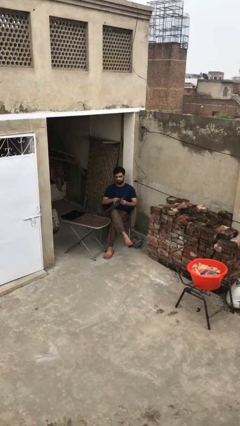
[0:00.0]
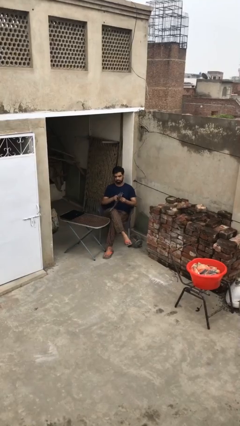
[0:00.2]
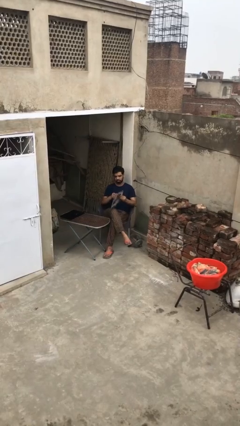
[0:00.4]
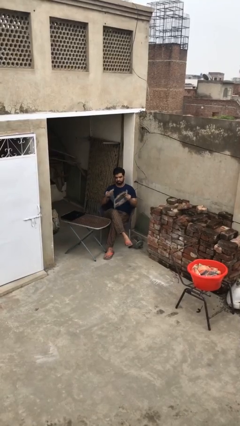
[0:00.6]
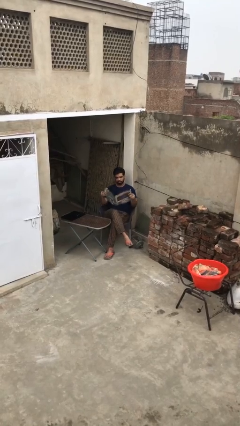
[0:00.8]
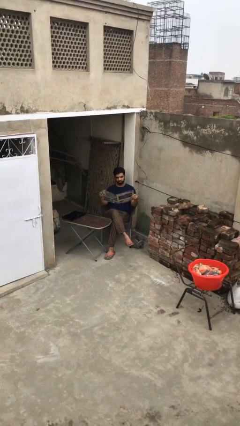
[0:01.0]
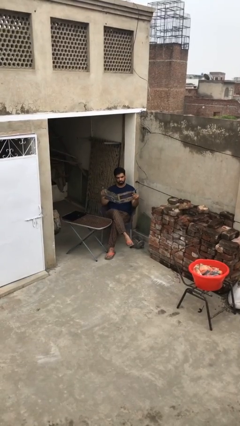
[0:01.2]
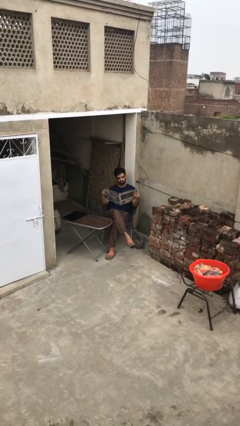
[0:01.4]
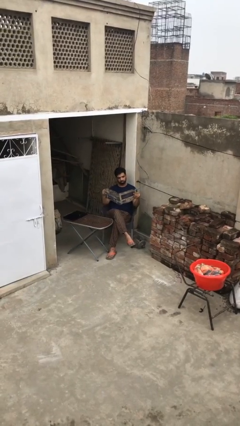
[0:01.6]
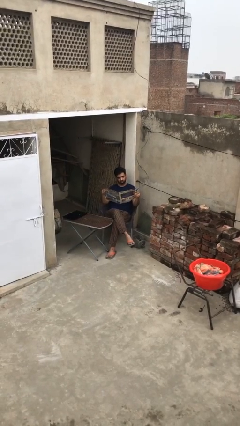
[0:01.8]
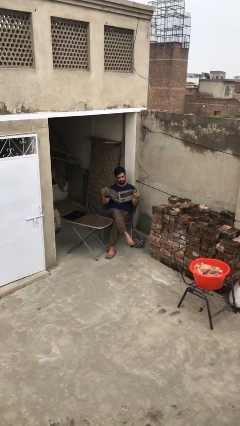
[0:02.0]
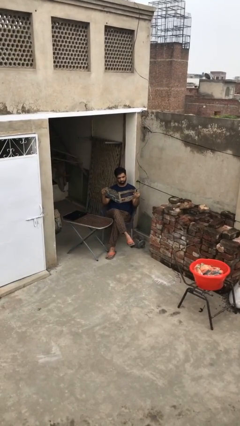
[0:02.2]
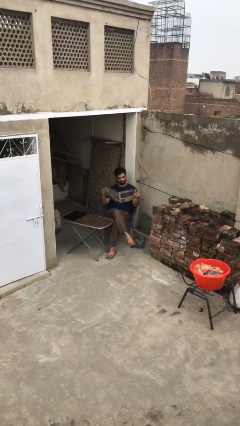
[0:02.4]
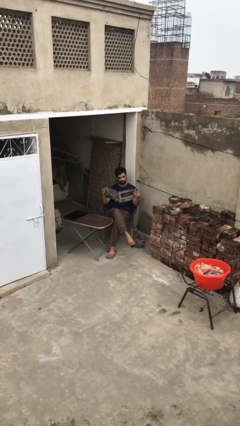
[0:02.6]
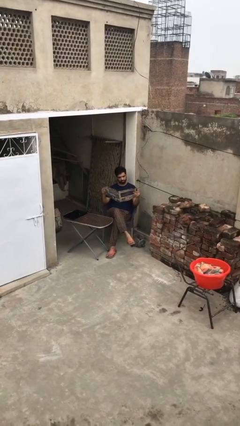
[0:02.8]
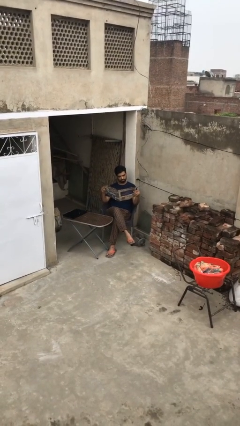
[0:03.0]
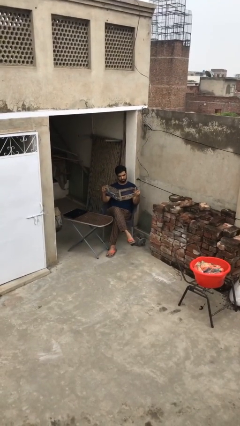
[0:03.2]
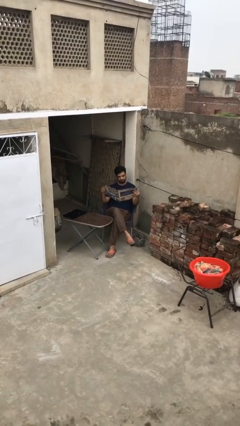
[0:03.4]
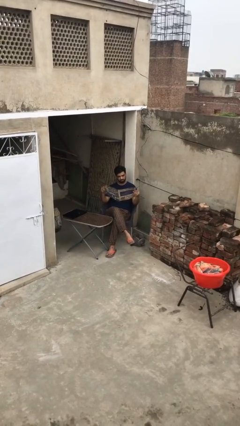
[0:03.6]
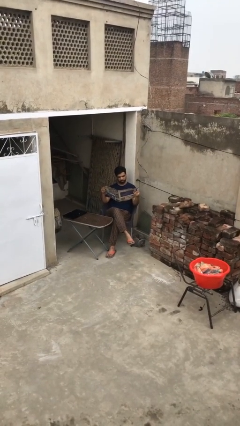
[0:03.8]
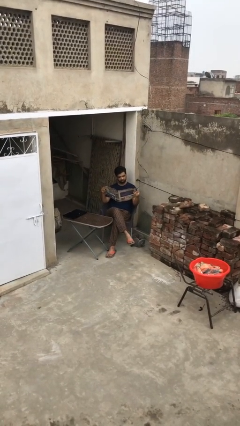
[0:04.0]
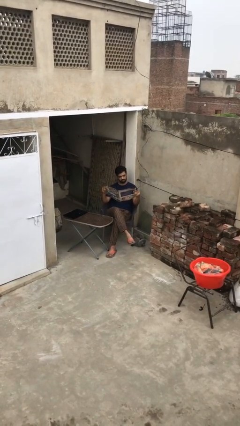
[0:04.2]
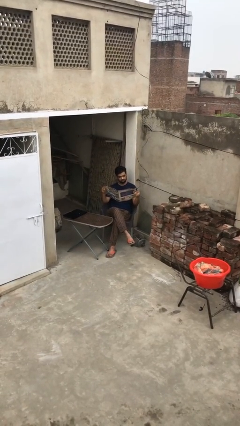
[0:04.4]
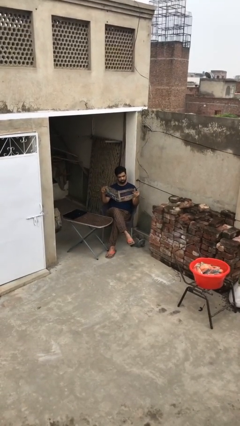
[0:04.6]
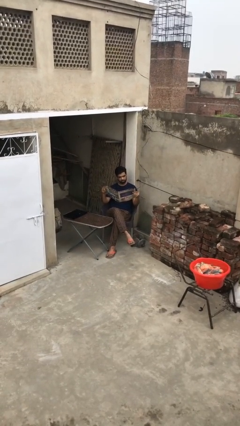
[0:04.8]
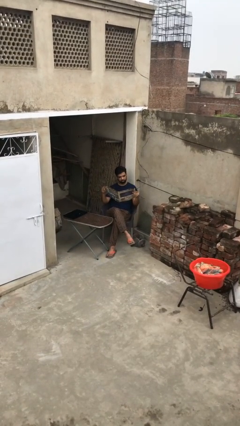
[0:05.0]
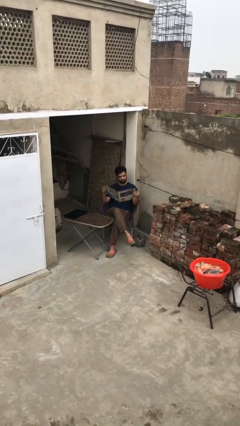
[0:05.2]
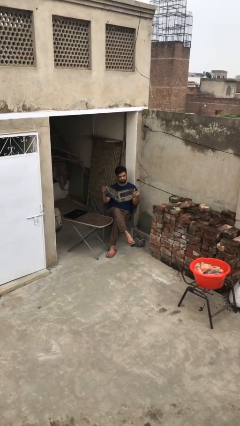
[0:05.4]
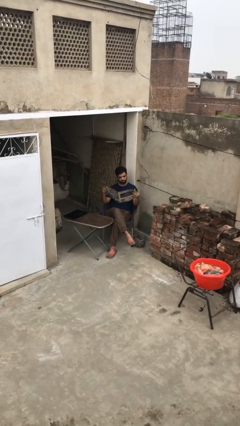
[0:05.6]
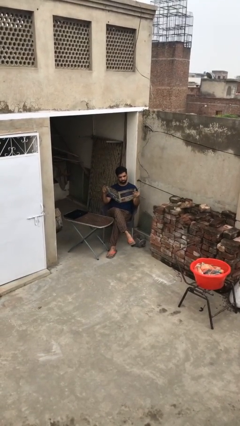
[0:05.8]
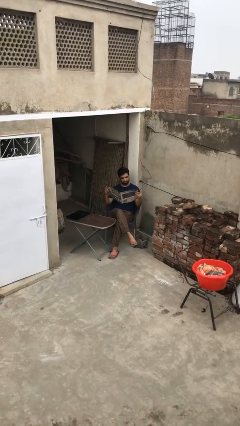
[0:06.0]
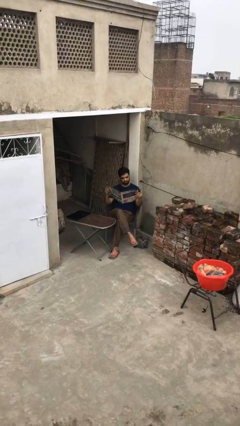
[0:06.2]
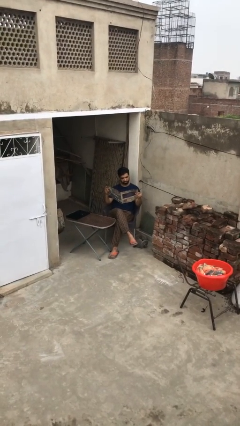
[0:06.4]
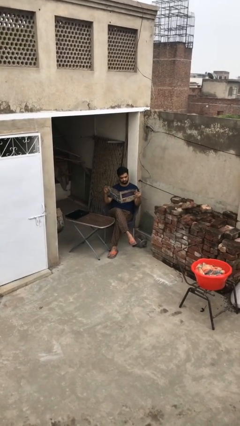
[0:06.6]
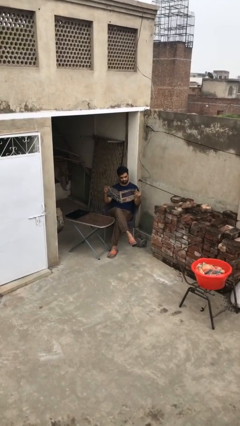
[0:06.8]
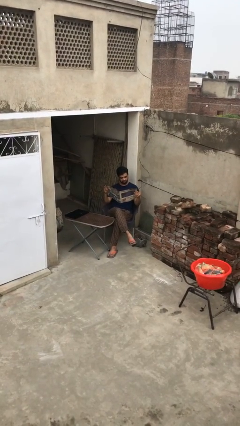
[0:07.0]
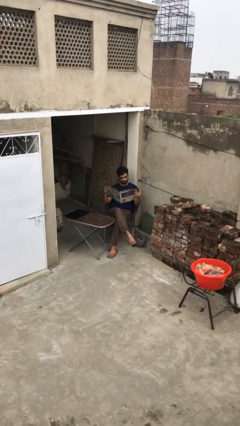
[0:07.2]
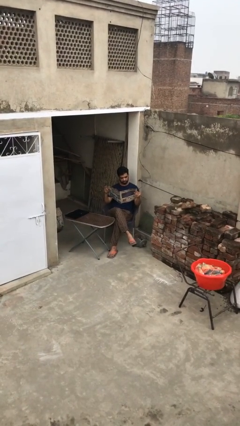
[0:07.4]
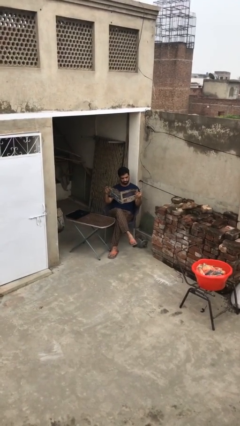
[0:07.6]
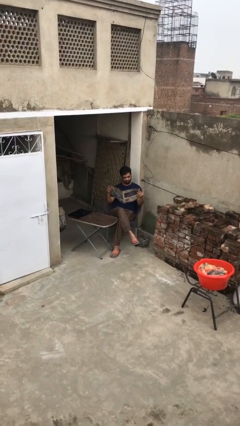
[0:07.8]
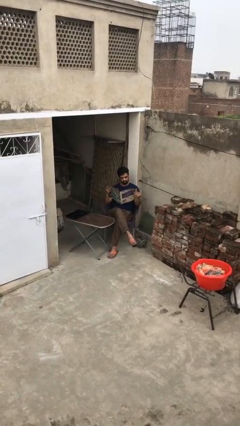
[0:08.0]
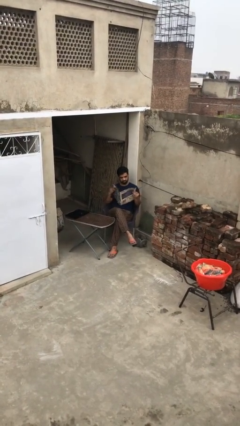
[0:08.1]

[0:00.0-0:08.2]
person reads document

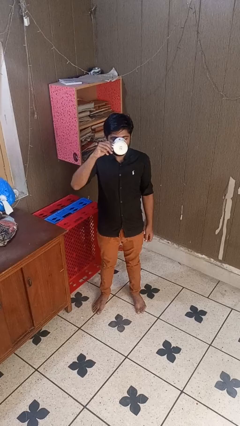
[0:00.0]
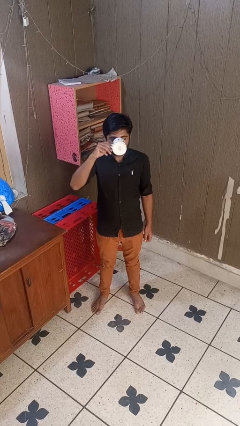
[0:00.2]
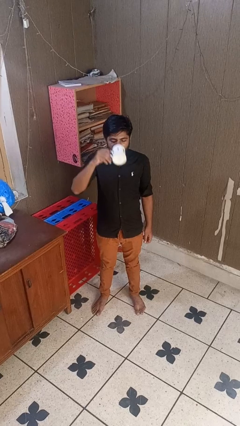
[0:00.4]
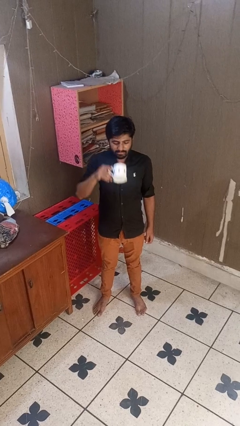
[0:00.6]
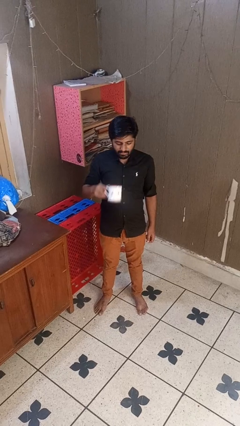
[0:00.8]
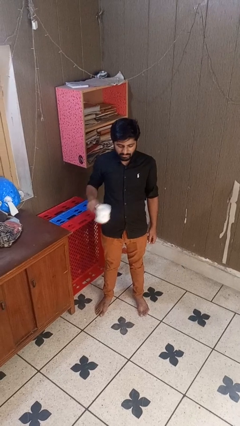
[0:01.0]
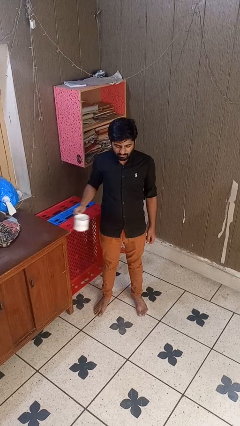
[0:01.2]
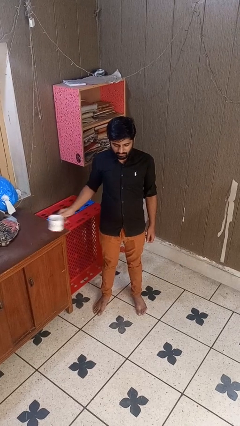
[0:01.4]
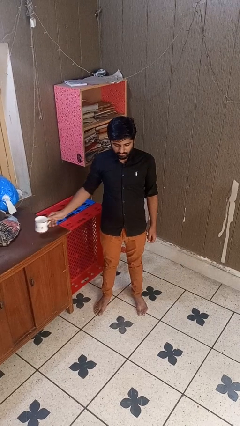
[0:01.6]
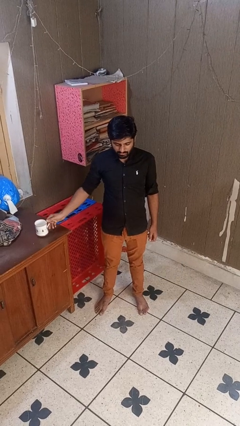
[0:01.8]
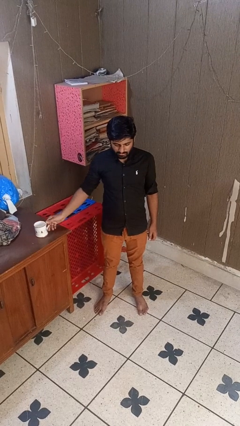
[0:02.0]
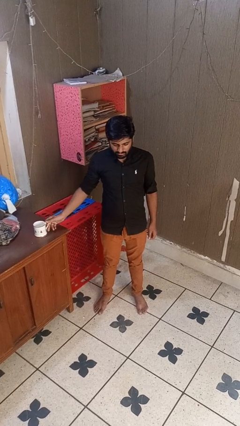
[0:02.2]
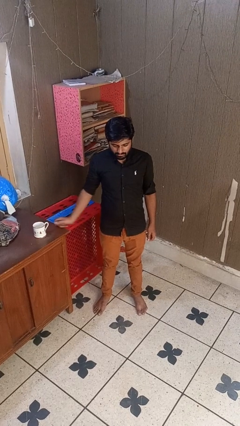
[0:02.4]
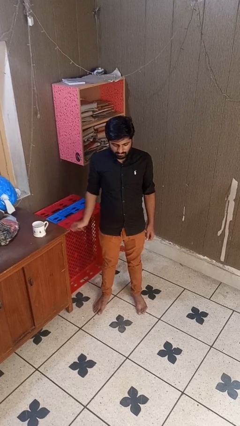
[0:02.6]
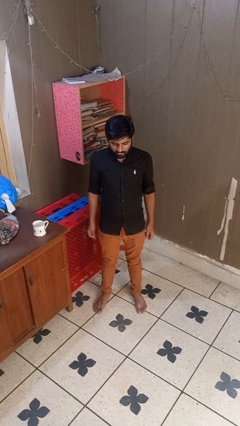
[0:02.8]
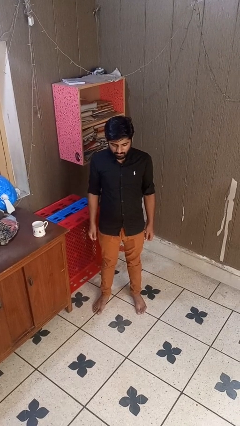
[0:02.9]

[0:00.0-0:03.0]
person puts down object on table

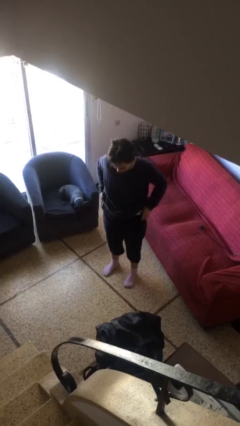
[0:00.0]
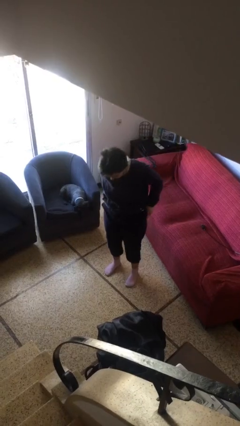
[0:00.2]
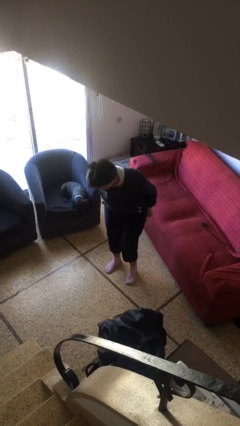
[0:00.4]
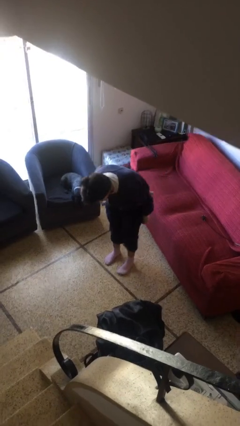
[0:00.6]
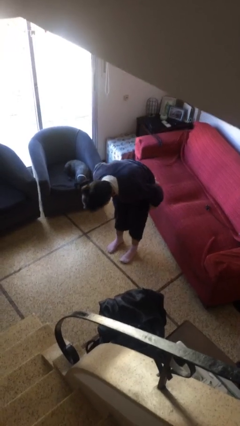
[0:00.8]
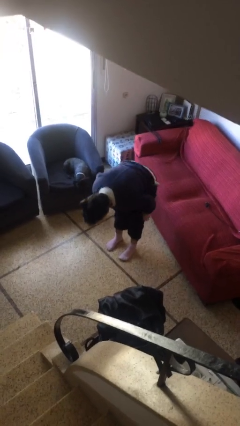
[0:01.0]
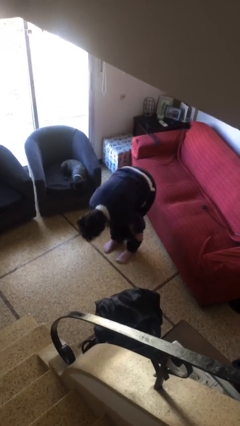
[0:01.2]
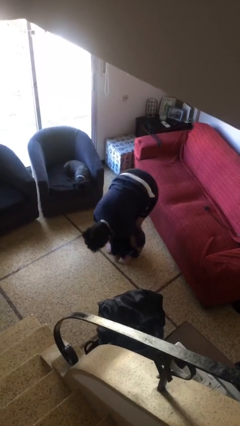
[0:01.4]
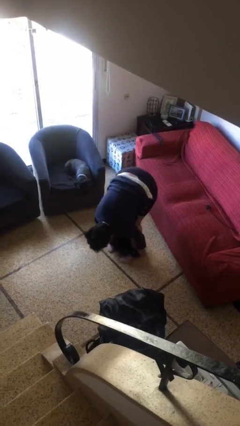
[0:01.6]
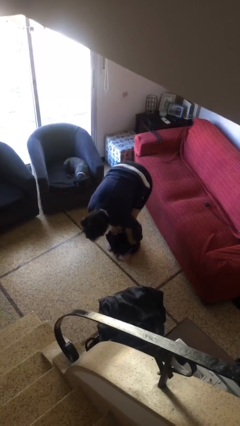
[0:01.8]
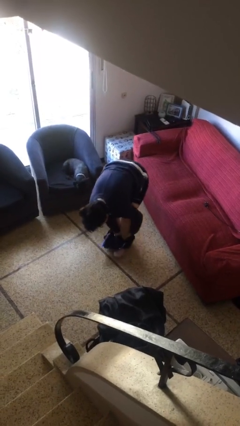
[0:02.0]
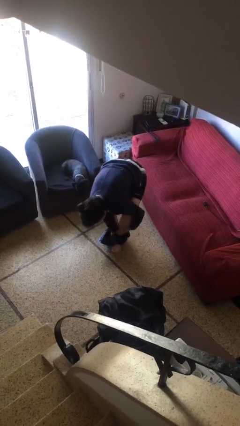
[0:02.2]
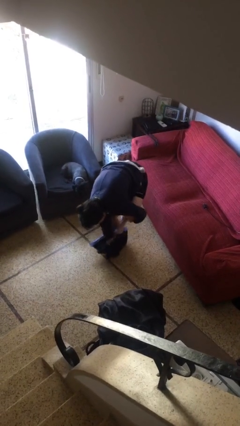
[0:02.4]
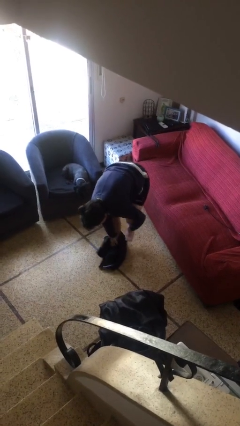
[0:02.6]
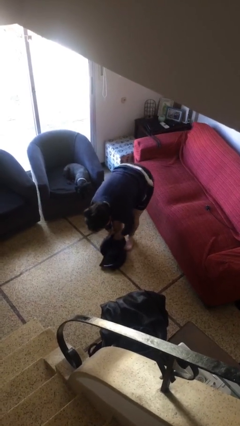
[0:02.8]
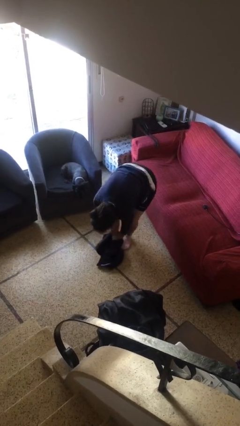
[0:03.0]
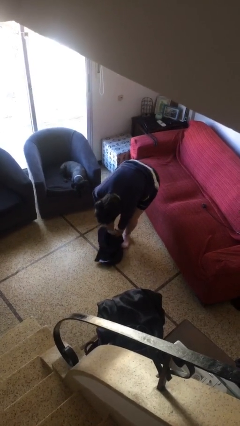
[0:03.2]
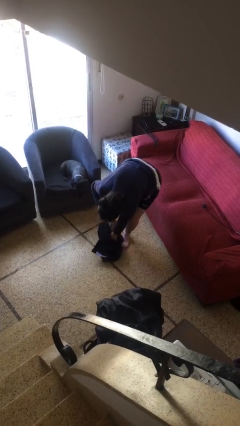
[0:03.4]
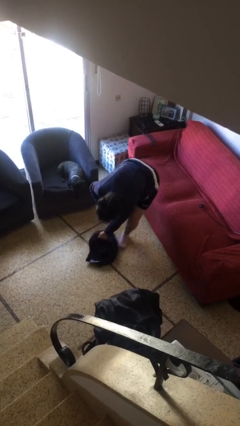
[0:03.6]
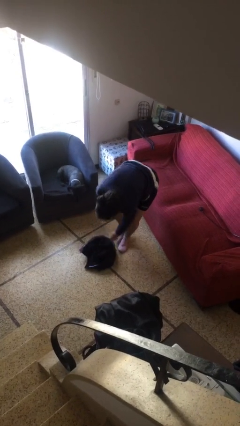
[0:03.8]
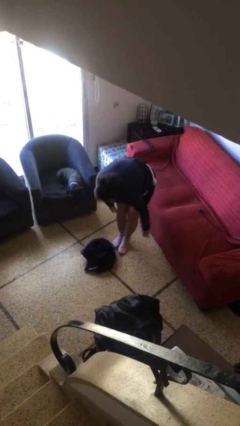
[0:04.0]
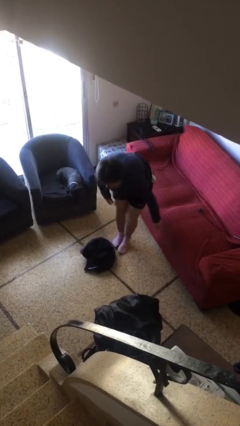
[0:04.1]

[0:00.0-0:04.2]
person takes off pants

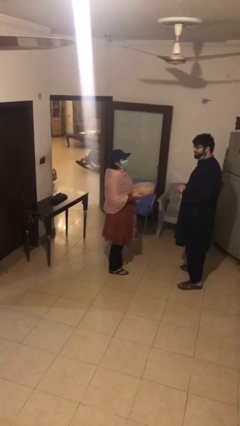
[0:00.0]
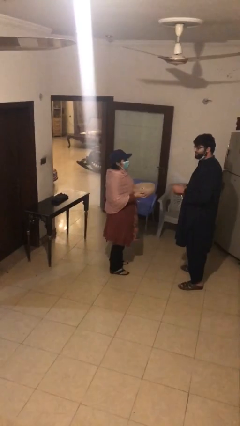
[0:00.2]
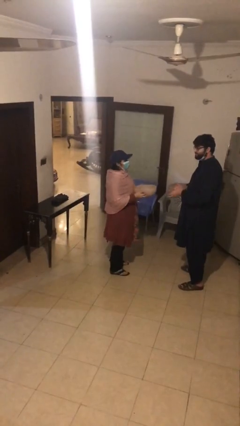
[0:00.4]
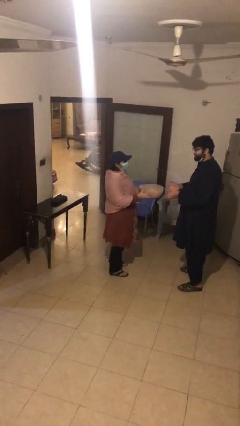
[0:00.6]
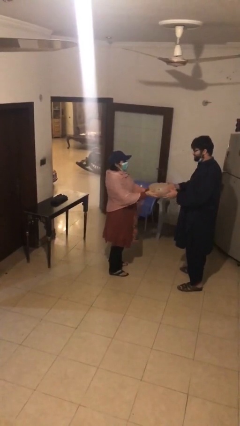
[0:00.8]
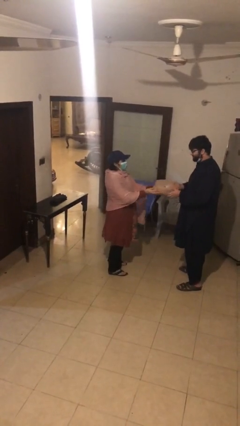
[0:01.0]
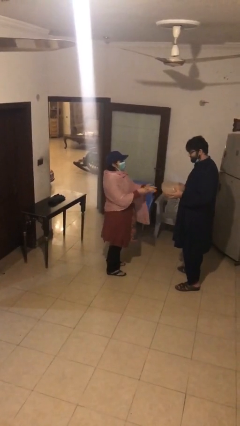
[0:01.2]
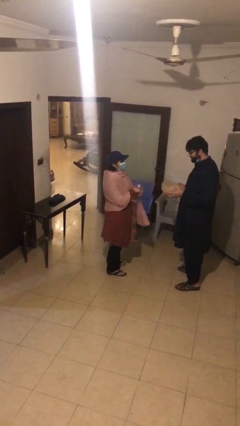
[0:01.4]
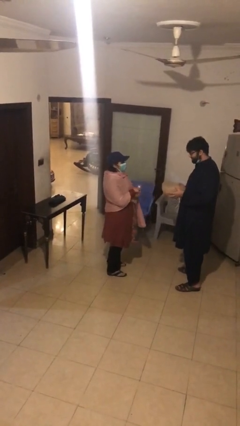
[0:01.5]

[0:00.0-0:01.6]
person transfers object to person

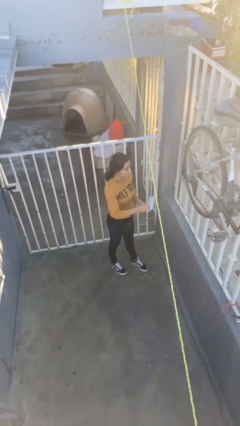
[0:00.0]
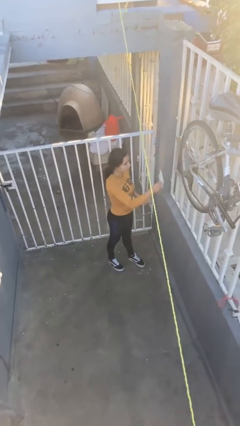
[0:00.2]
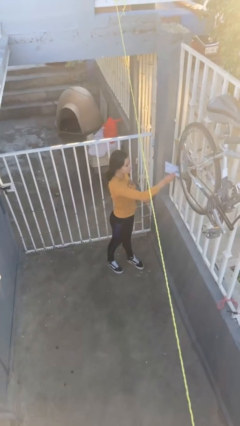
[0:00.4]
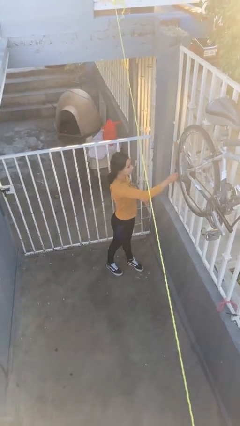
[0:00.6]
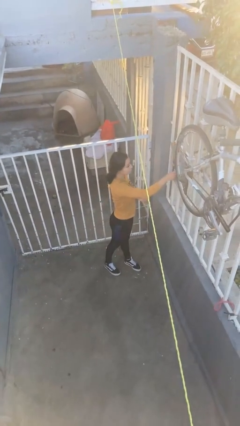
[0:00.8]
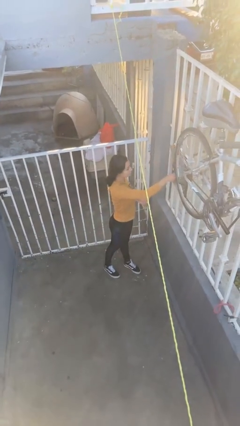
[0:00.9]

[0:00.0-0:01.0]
person puts letters in mailbox
